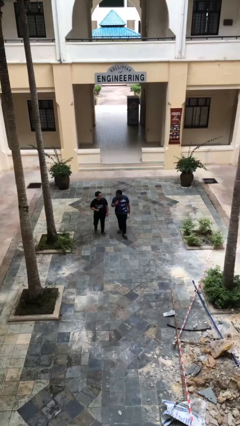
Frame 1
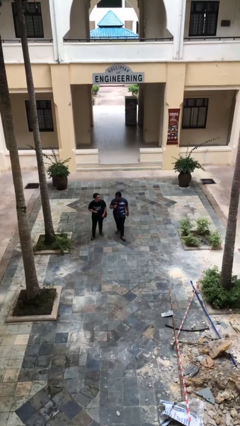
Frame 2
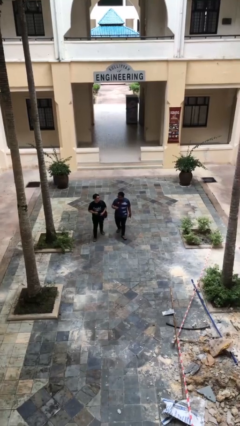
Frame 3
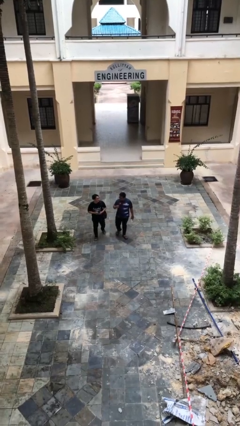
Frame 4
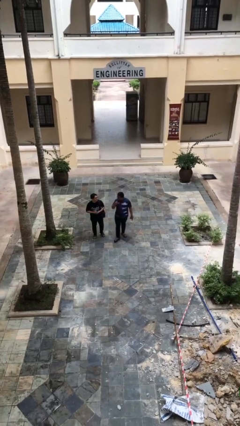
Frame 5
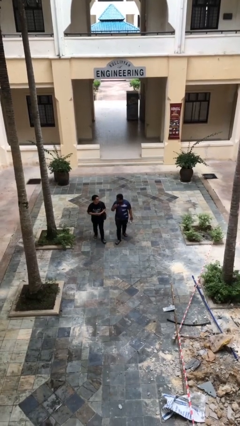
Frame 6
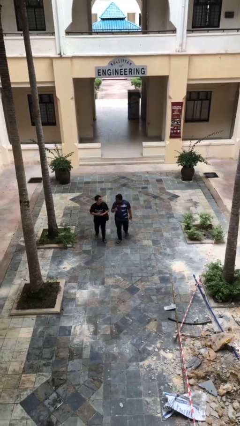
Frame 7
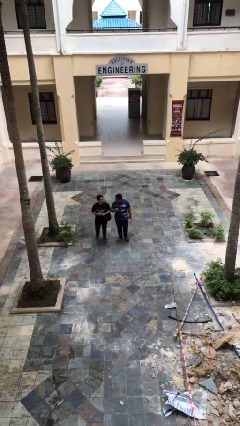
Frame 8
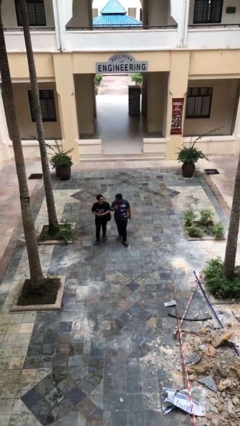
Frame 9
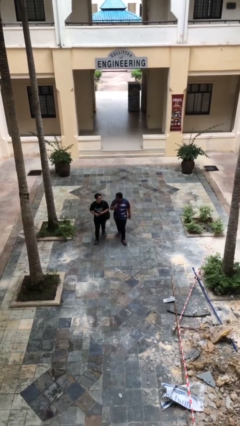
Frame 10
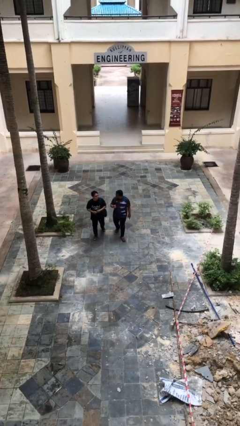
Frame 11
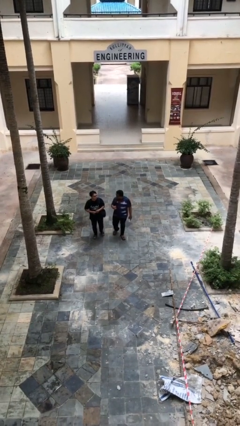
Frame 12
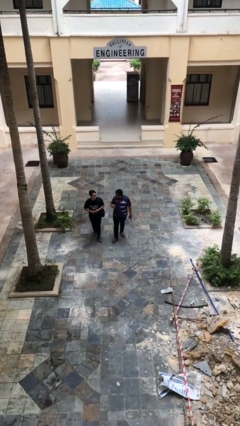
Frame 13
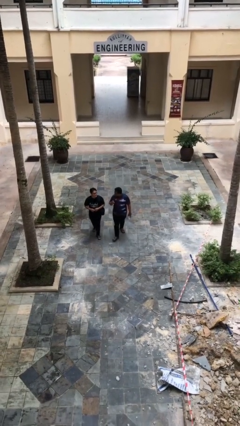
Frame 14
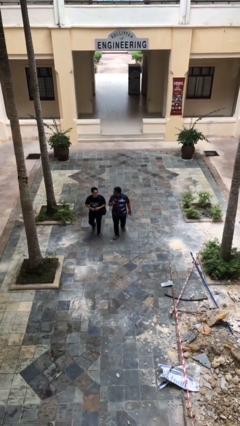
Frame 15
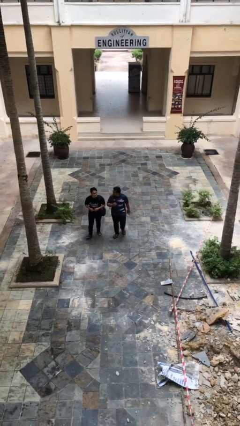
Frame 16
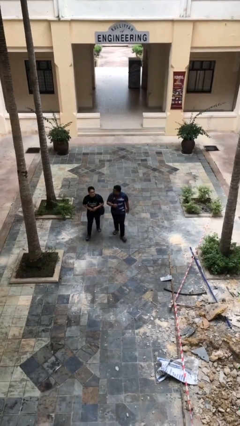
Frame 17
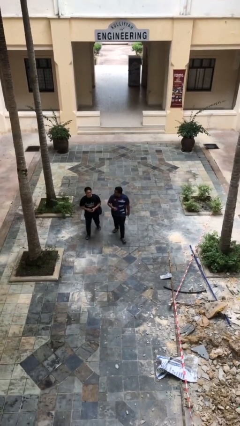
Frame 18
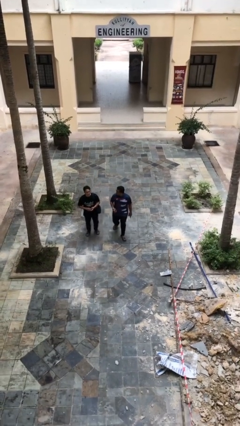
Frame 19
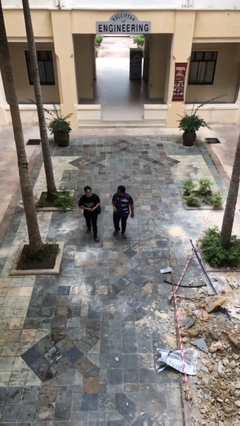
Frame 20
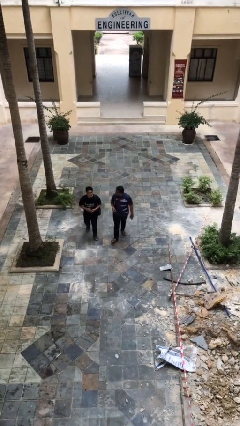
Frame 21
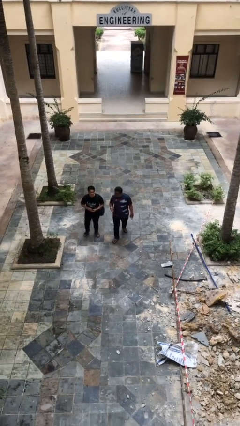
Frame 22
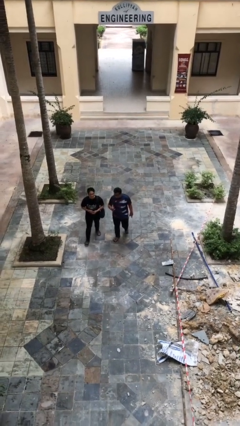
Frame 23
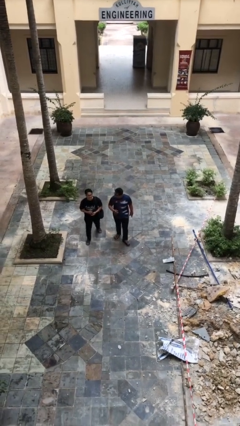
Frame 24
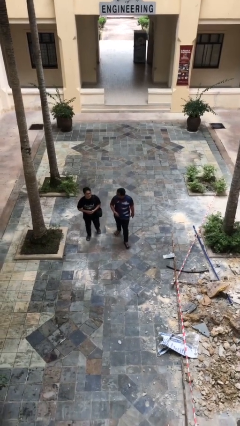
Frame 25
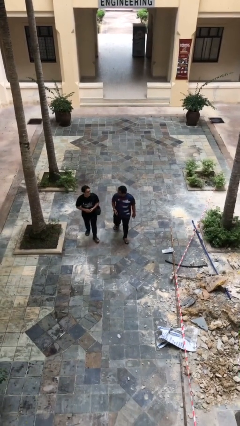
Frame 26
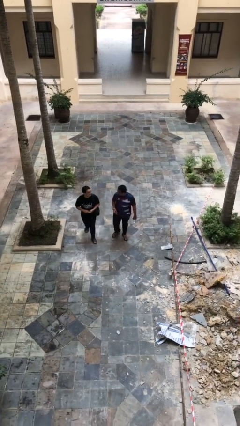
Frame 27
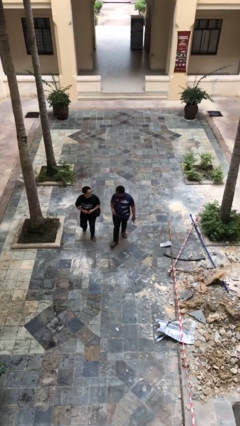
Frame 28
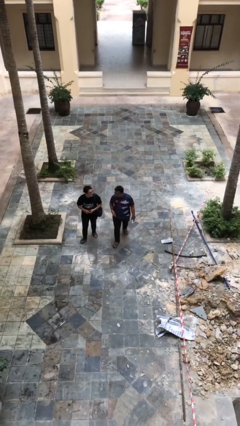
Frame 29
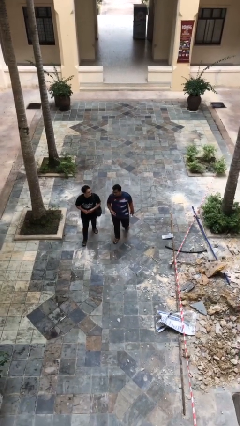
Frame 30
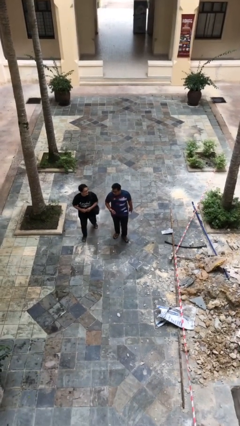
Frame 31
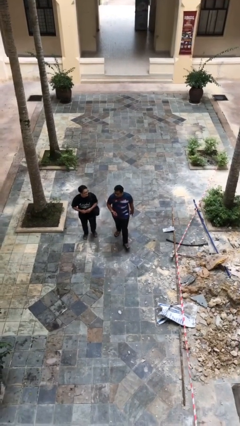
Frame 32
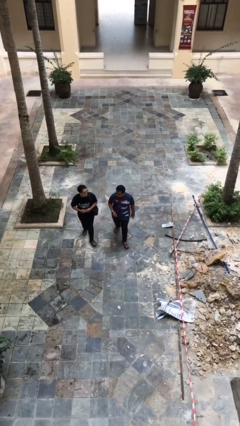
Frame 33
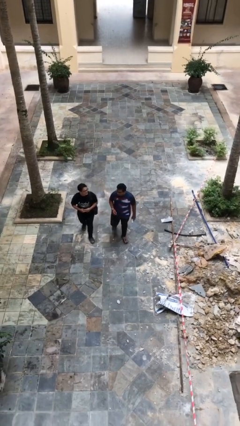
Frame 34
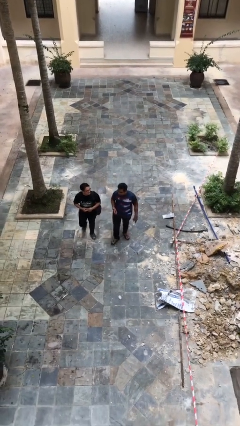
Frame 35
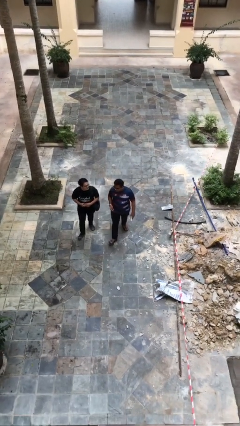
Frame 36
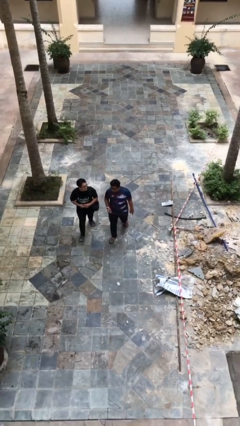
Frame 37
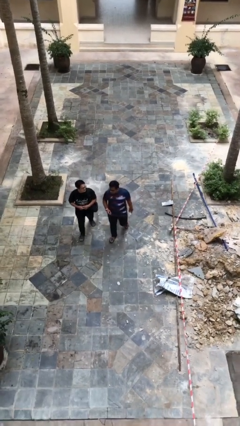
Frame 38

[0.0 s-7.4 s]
person talks to person

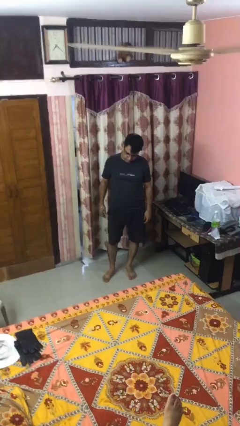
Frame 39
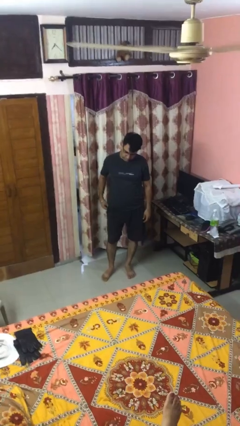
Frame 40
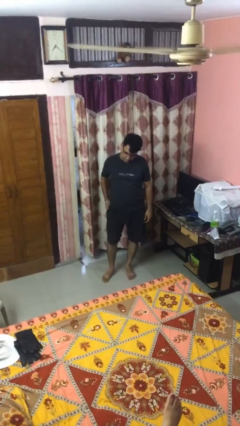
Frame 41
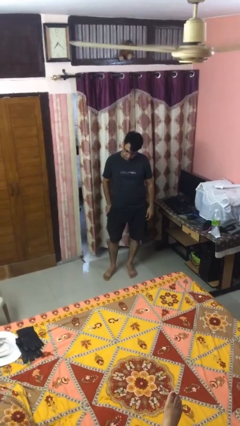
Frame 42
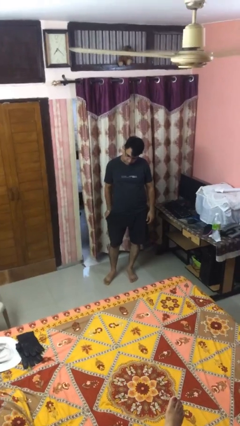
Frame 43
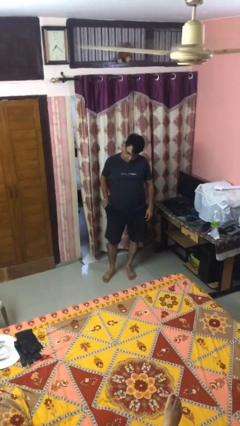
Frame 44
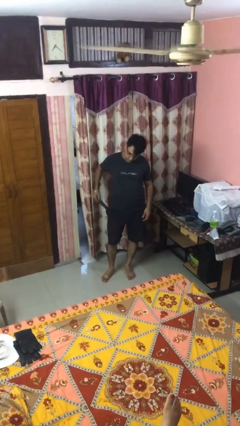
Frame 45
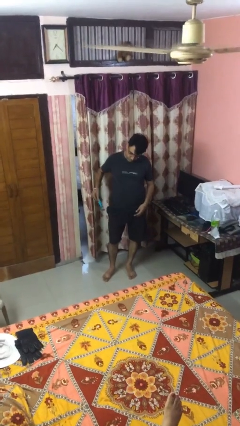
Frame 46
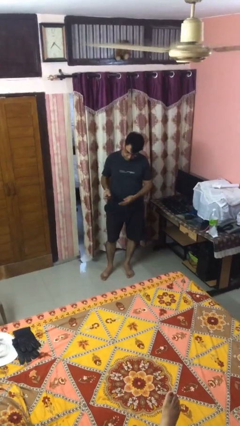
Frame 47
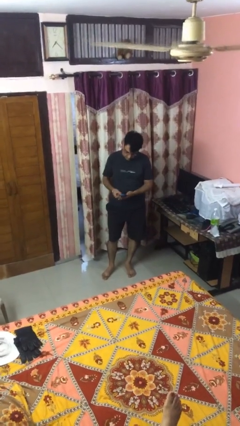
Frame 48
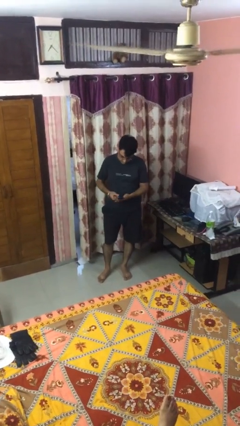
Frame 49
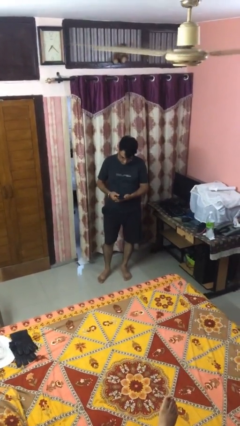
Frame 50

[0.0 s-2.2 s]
person takes phone from pocket

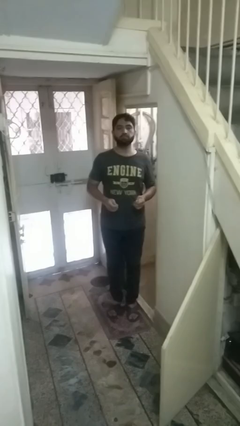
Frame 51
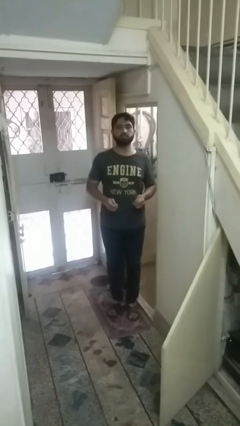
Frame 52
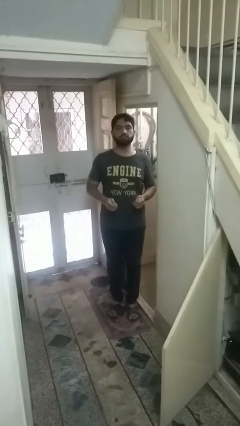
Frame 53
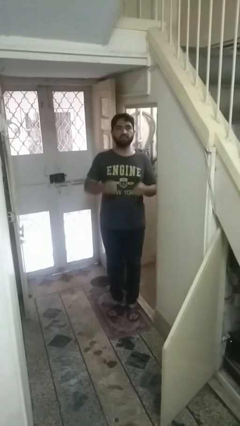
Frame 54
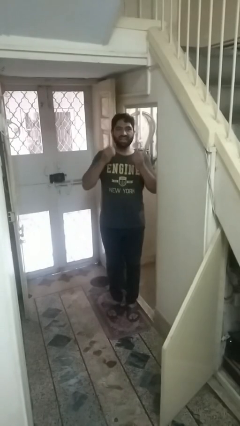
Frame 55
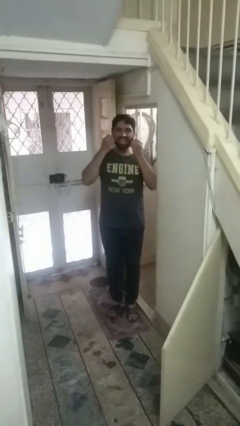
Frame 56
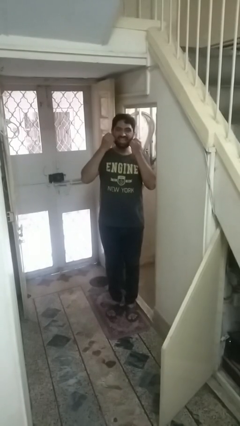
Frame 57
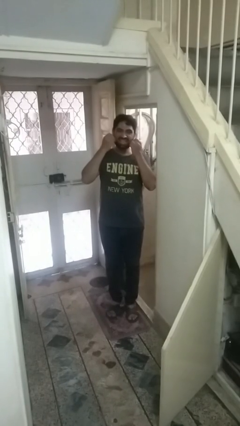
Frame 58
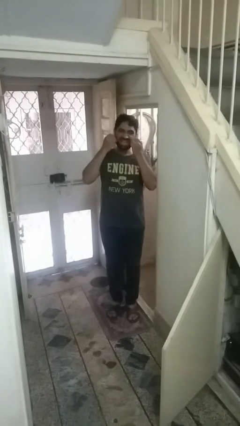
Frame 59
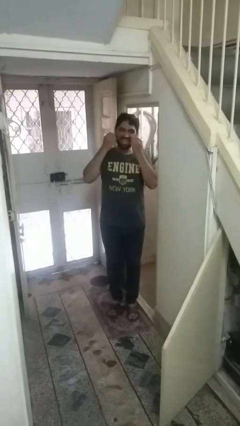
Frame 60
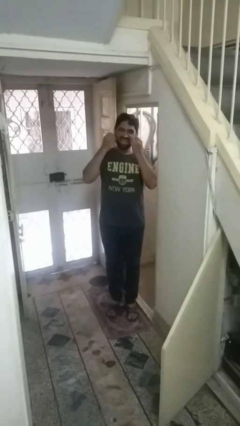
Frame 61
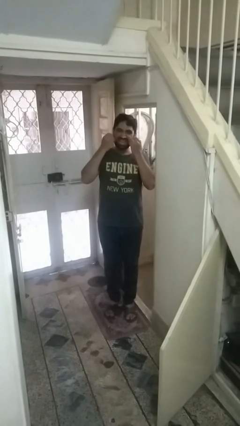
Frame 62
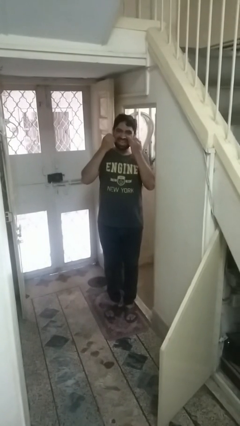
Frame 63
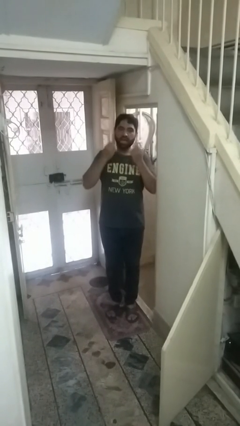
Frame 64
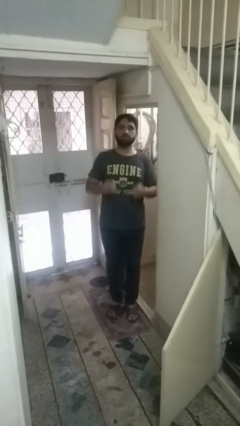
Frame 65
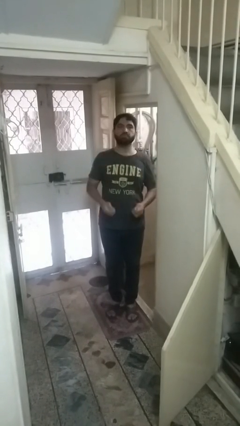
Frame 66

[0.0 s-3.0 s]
person flosses

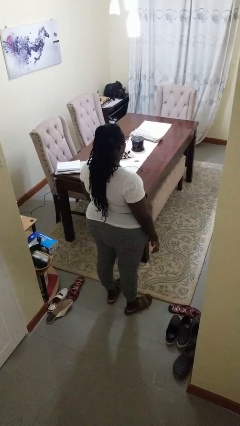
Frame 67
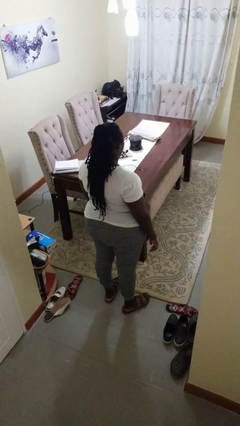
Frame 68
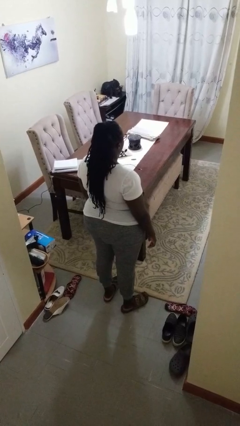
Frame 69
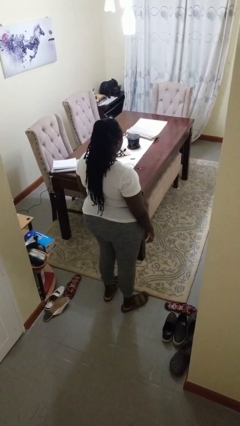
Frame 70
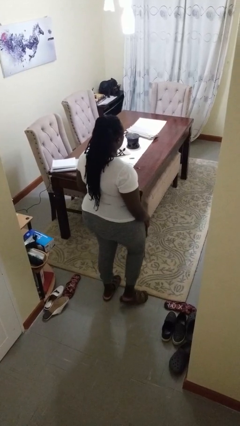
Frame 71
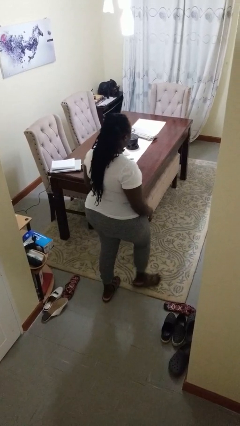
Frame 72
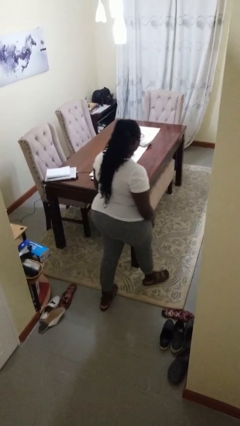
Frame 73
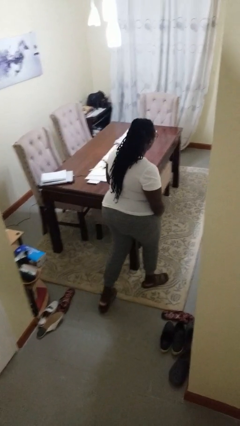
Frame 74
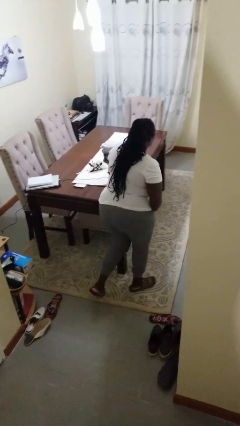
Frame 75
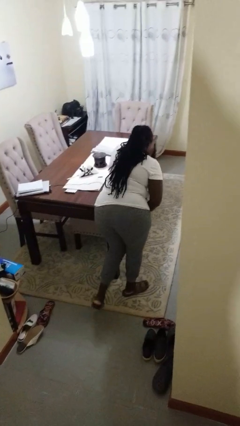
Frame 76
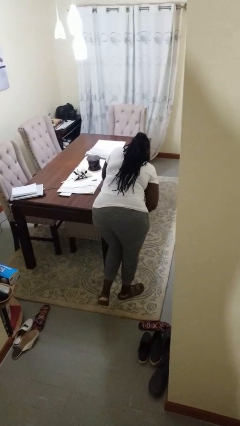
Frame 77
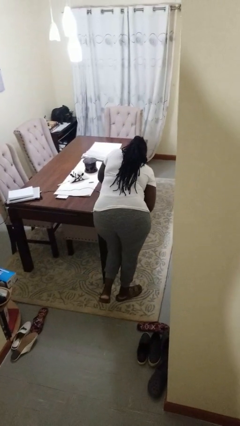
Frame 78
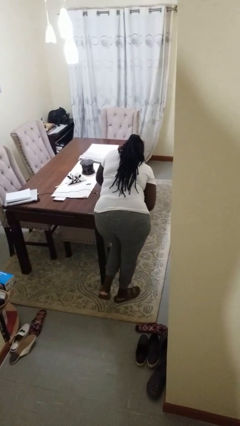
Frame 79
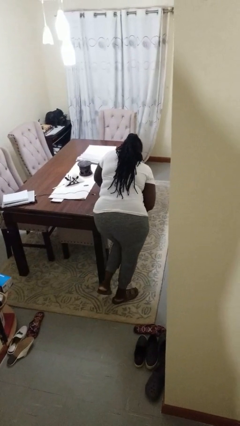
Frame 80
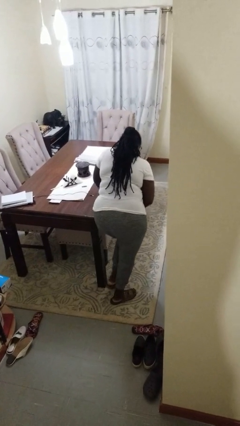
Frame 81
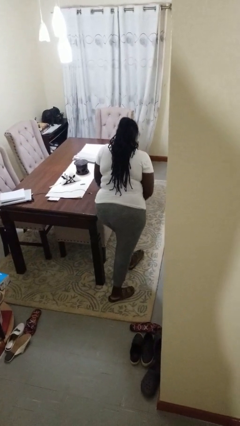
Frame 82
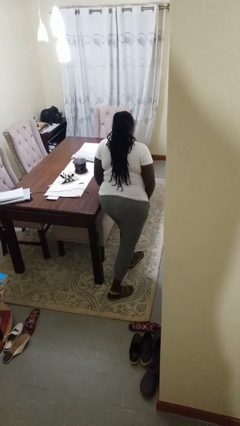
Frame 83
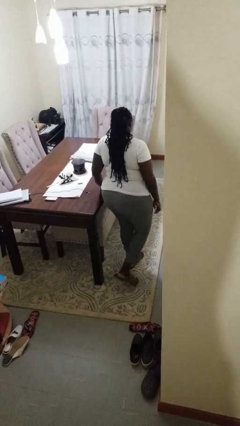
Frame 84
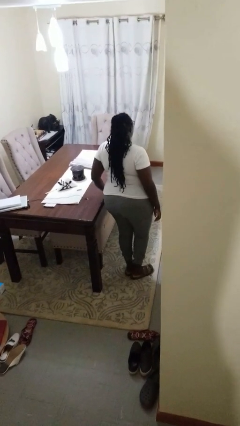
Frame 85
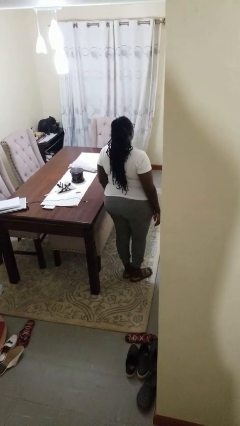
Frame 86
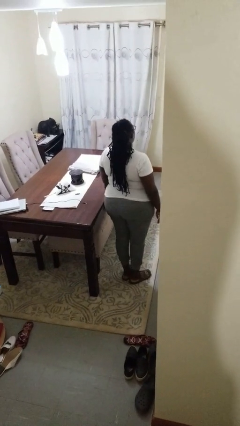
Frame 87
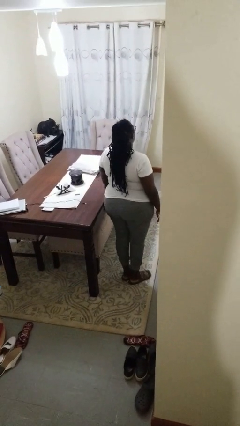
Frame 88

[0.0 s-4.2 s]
person bumps into table

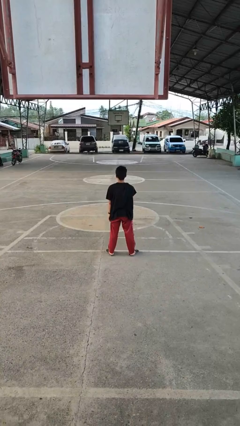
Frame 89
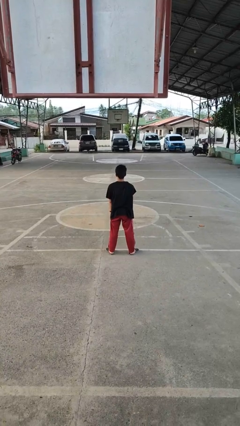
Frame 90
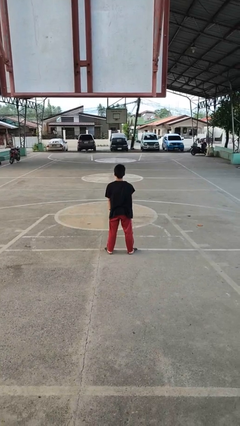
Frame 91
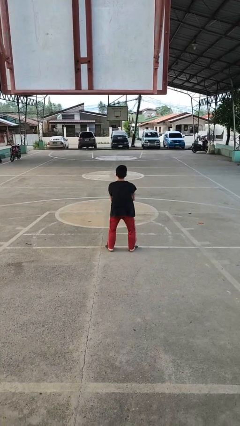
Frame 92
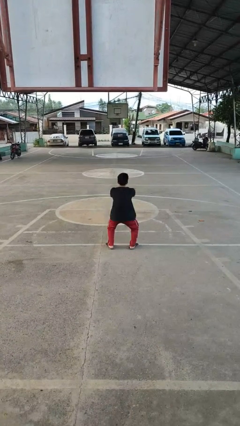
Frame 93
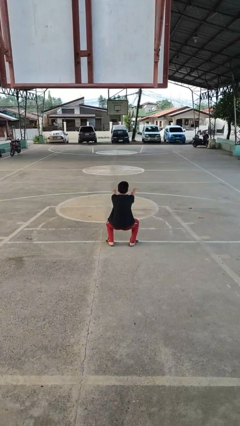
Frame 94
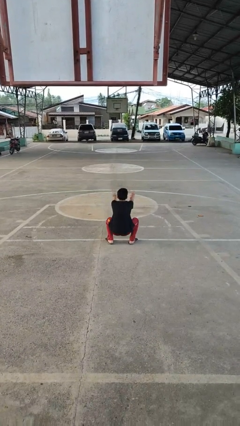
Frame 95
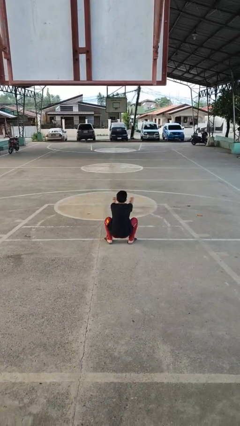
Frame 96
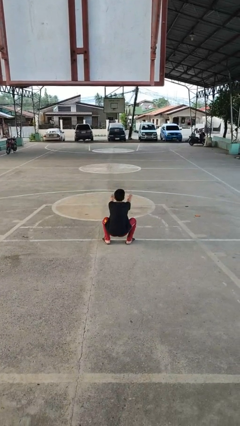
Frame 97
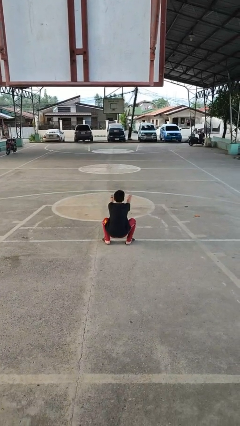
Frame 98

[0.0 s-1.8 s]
person squats
